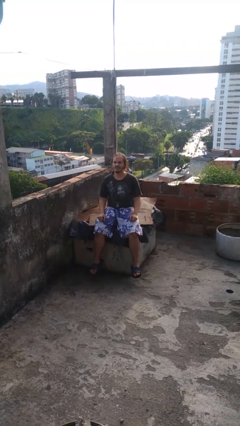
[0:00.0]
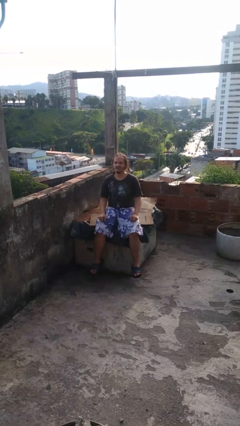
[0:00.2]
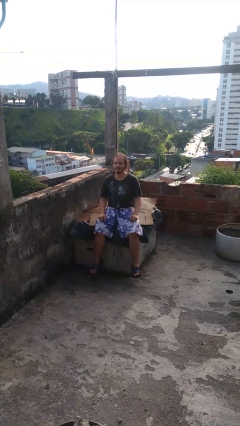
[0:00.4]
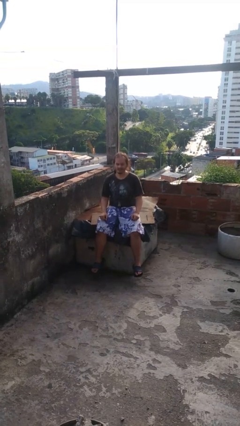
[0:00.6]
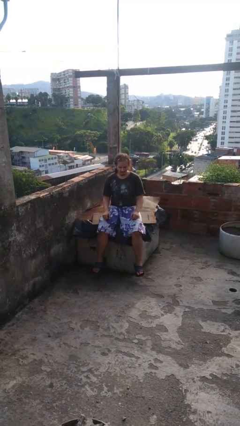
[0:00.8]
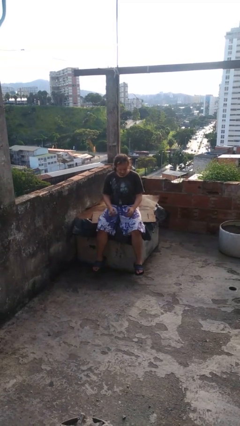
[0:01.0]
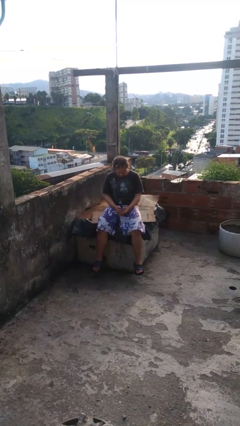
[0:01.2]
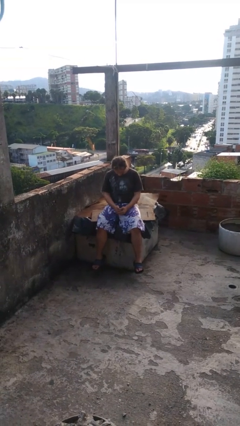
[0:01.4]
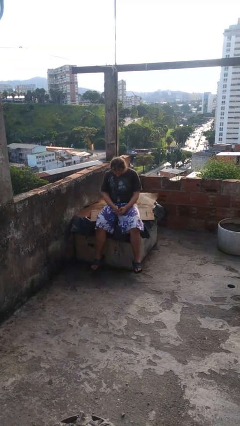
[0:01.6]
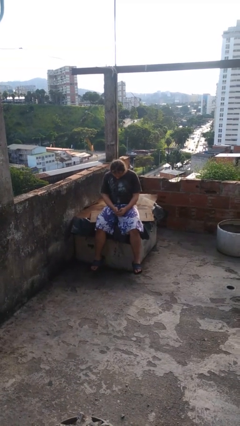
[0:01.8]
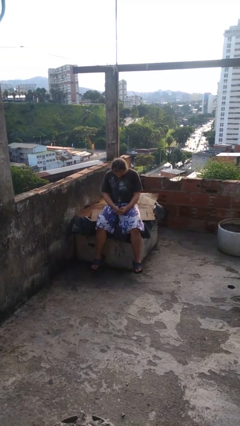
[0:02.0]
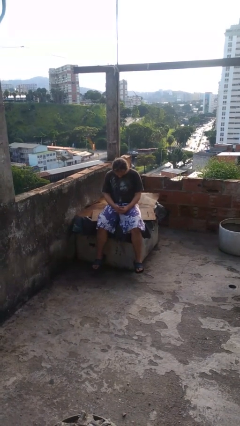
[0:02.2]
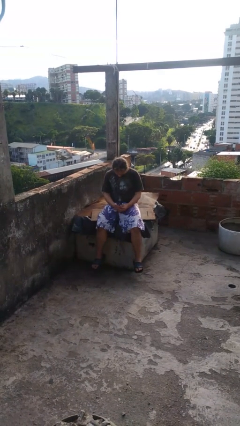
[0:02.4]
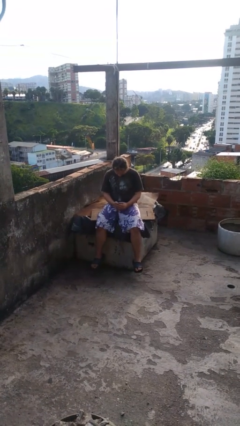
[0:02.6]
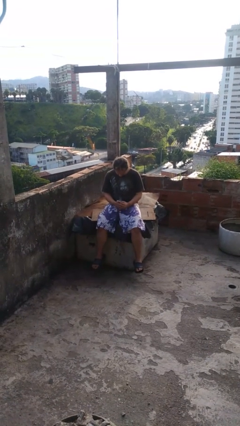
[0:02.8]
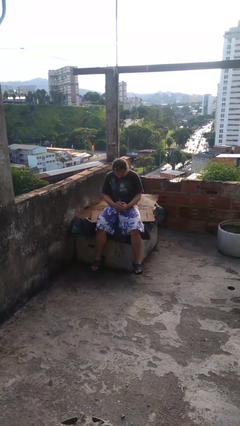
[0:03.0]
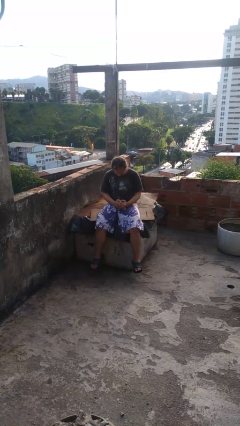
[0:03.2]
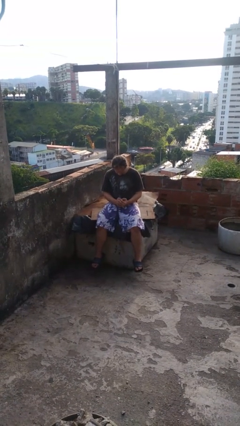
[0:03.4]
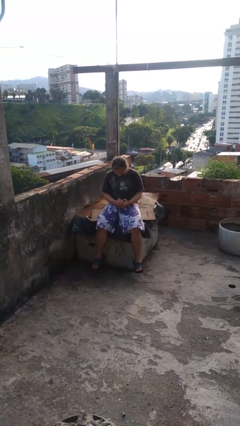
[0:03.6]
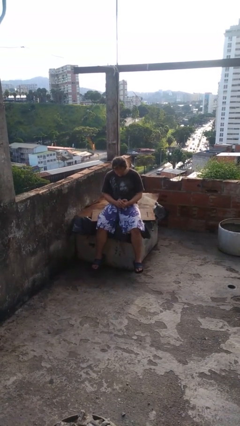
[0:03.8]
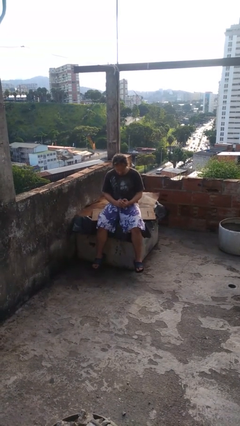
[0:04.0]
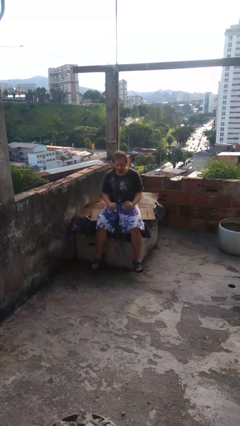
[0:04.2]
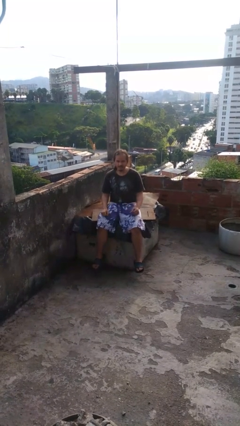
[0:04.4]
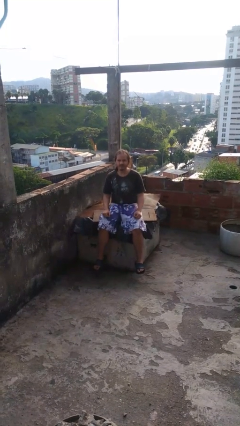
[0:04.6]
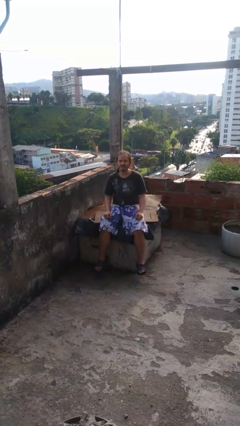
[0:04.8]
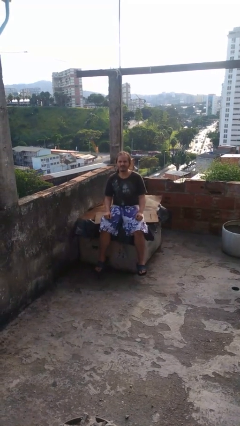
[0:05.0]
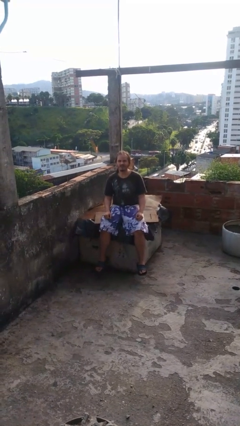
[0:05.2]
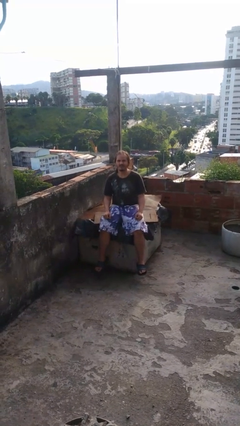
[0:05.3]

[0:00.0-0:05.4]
person looks at hands in lap

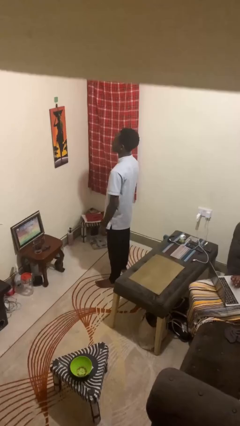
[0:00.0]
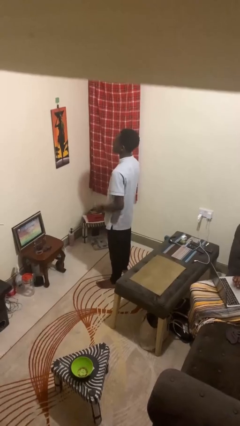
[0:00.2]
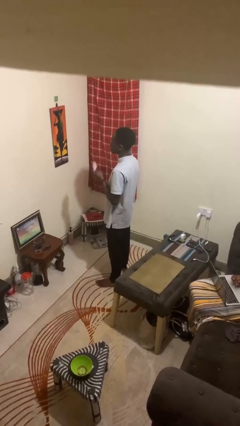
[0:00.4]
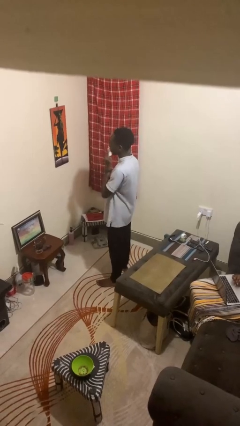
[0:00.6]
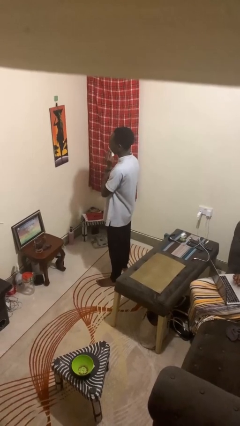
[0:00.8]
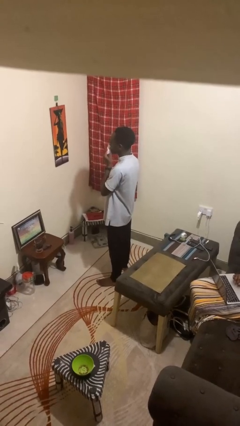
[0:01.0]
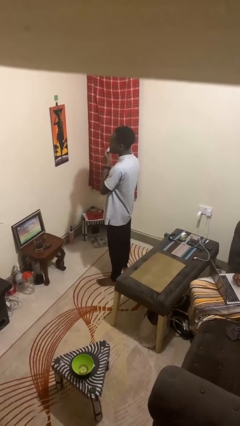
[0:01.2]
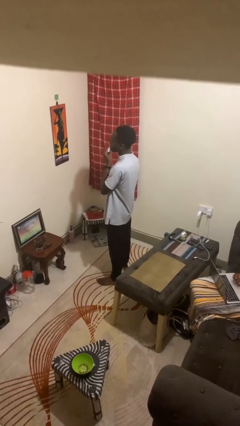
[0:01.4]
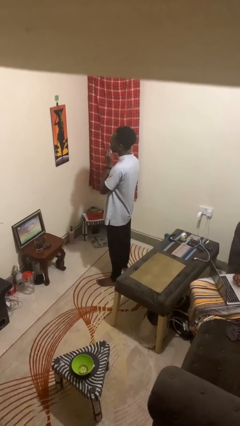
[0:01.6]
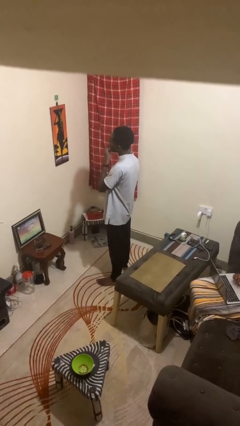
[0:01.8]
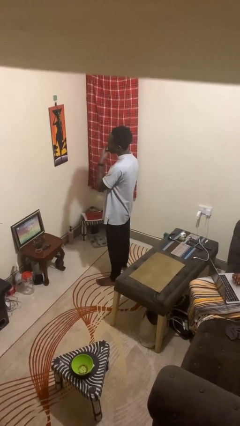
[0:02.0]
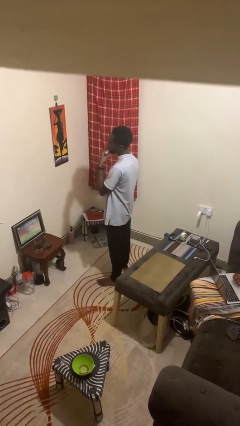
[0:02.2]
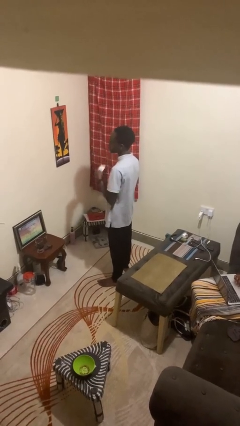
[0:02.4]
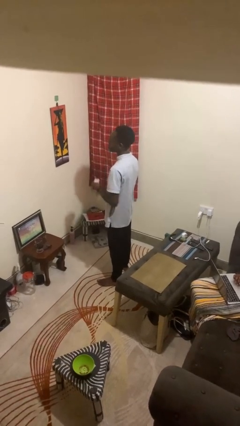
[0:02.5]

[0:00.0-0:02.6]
person wipes mouth with napkin

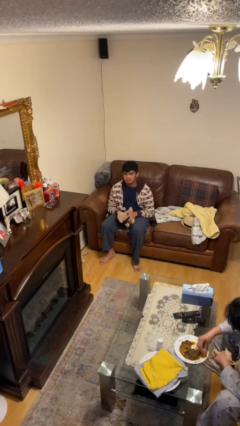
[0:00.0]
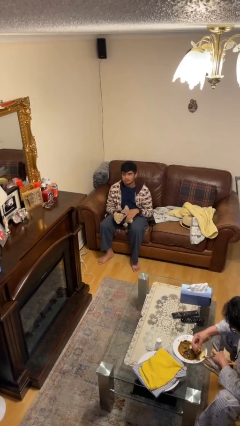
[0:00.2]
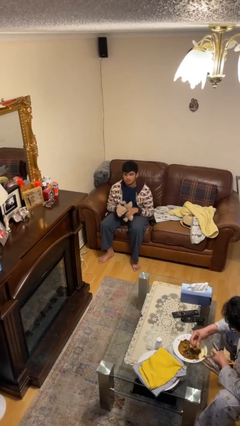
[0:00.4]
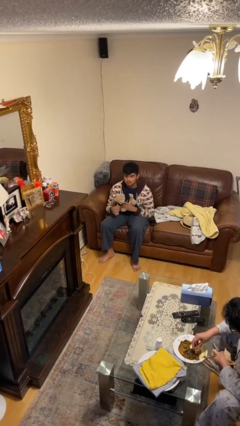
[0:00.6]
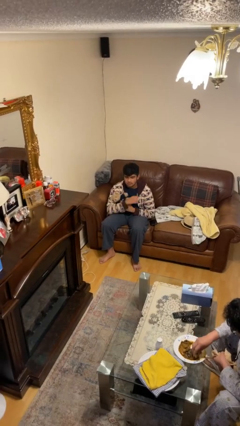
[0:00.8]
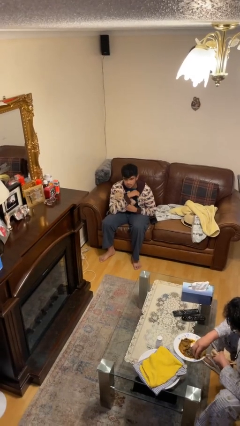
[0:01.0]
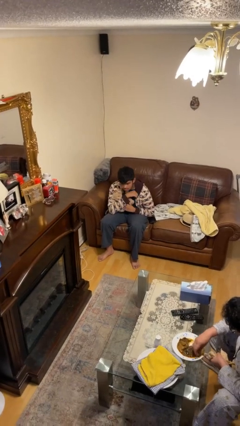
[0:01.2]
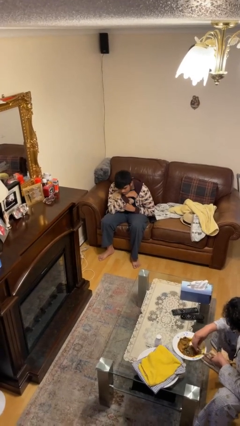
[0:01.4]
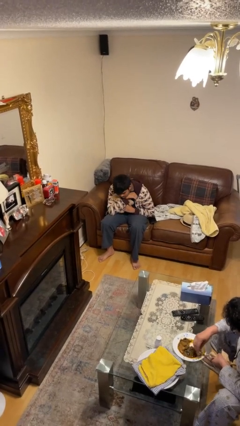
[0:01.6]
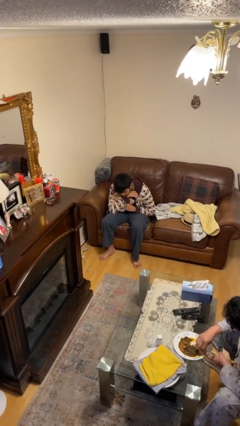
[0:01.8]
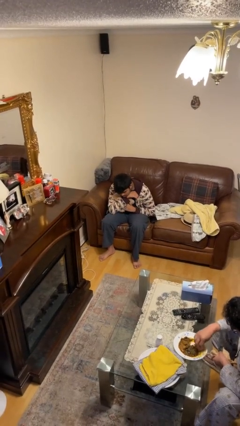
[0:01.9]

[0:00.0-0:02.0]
person hugs stuffed animal

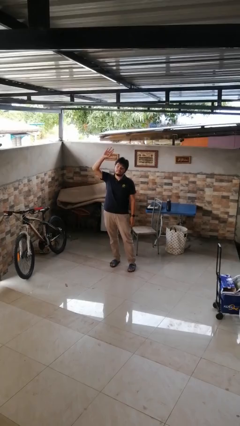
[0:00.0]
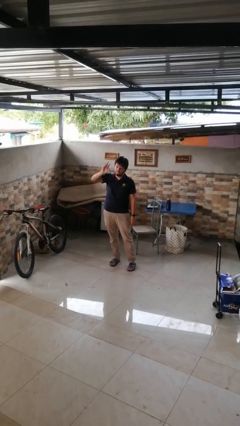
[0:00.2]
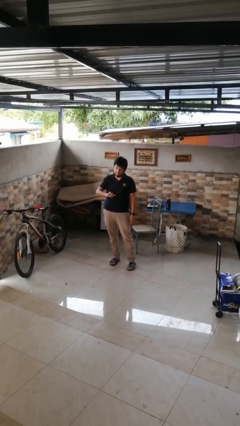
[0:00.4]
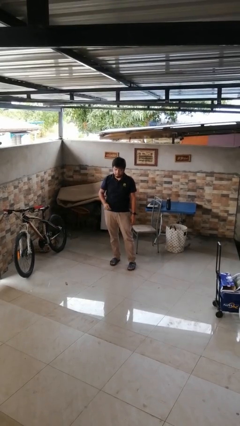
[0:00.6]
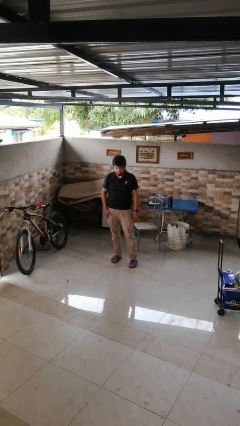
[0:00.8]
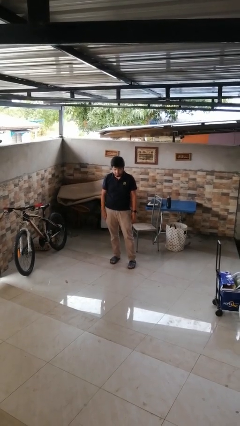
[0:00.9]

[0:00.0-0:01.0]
person gestures swipe down

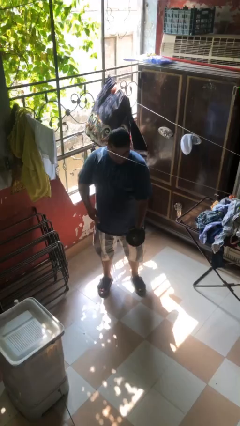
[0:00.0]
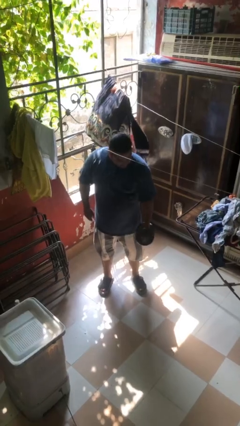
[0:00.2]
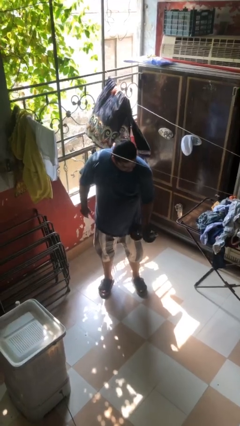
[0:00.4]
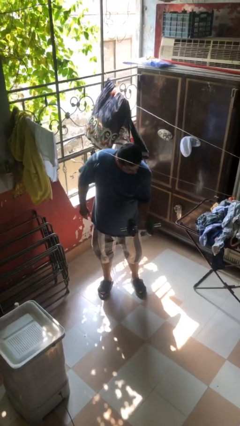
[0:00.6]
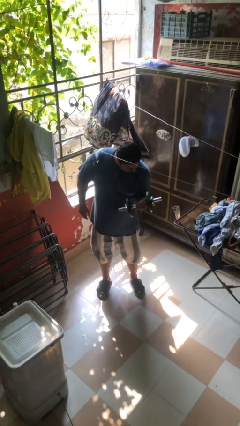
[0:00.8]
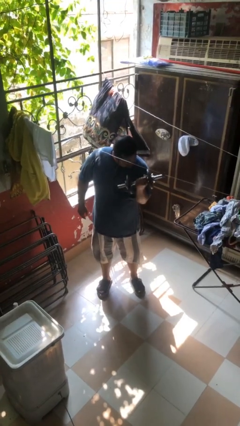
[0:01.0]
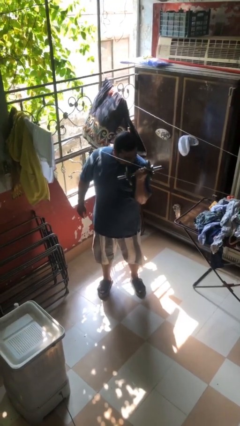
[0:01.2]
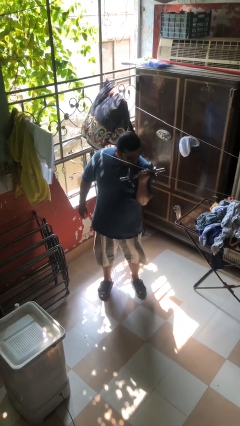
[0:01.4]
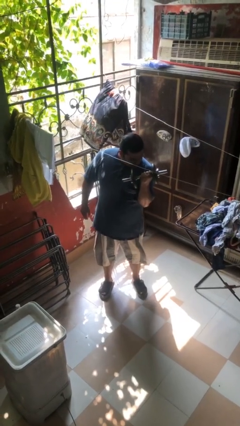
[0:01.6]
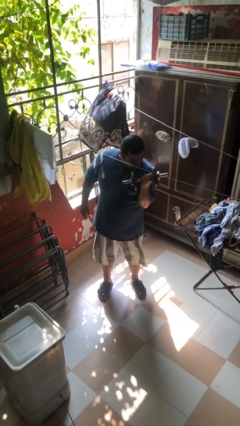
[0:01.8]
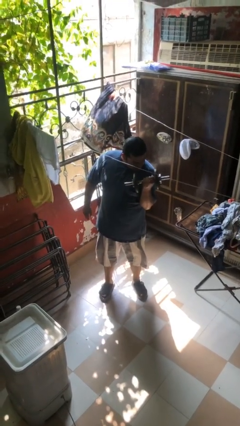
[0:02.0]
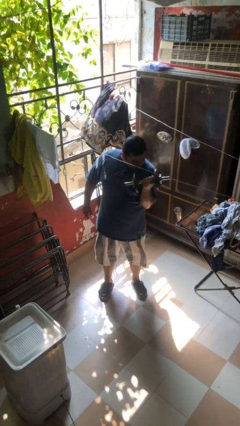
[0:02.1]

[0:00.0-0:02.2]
person lifts dumbbells

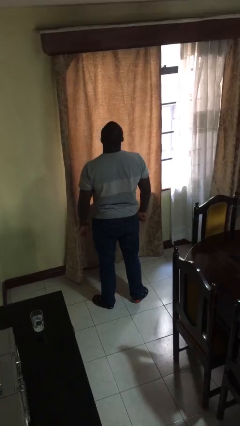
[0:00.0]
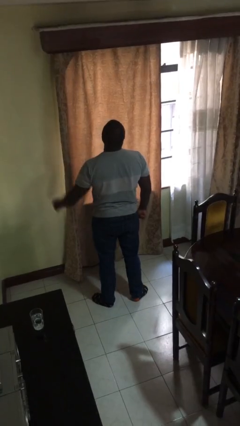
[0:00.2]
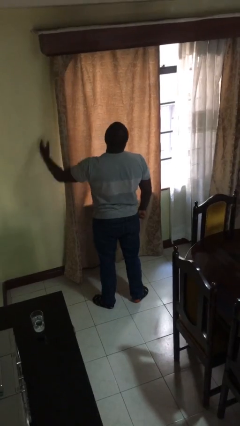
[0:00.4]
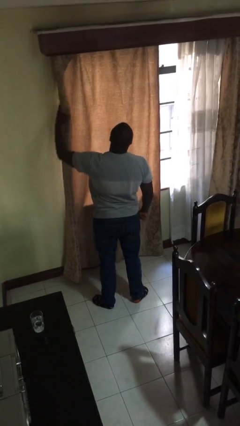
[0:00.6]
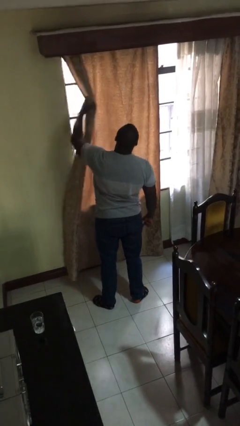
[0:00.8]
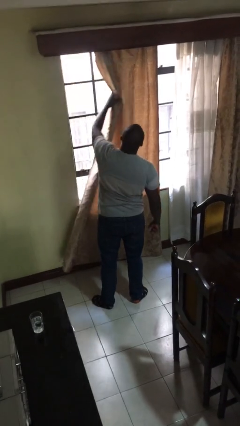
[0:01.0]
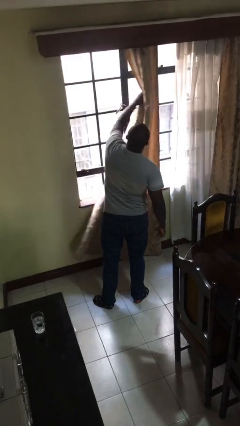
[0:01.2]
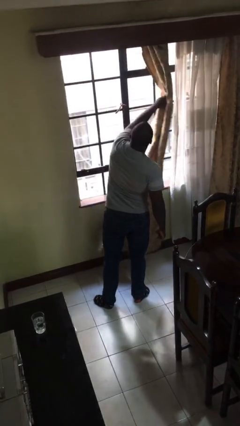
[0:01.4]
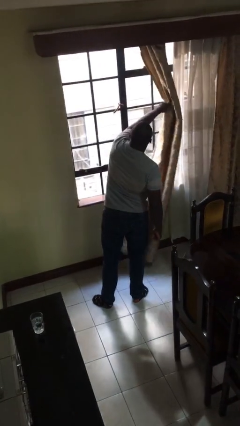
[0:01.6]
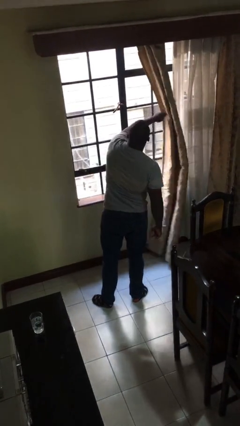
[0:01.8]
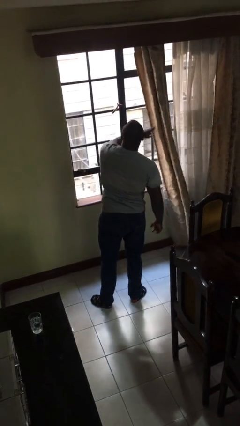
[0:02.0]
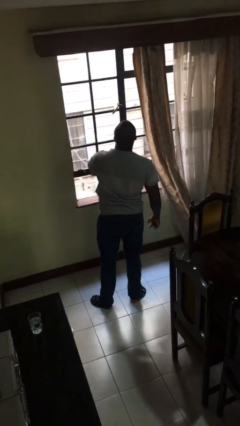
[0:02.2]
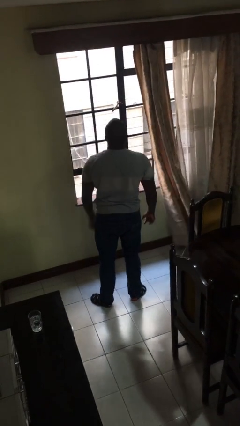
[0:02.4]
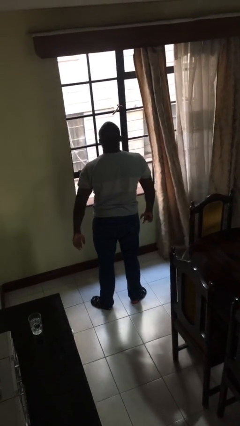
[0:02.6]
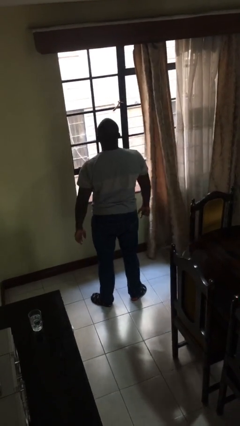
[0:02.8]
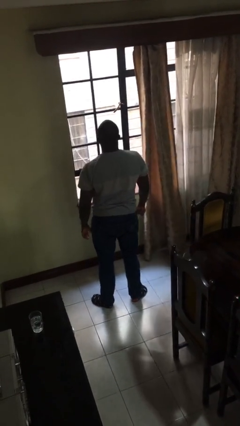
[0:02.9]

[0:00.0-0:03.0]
person opens curtains

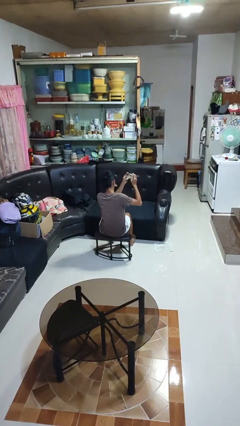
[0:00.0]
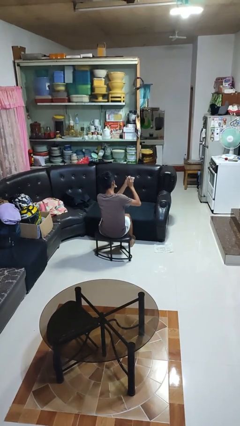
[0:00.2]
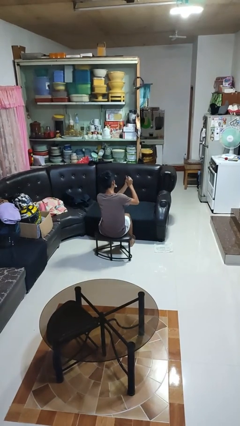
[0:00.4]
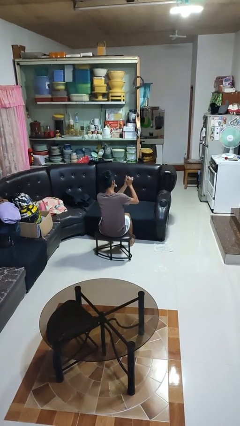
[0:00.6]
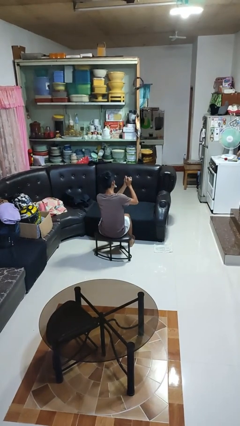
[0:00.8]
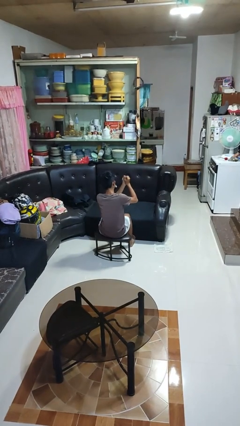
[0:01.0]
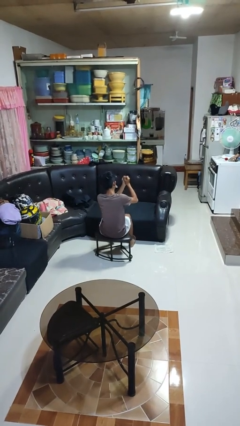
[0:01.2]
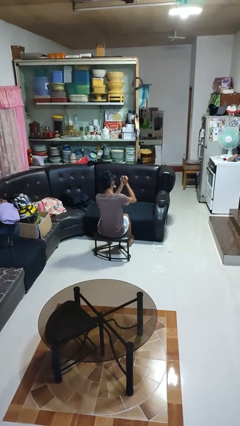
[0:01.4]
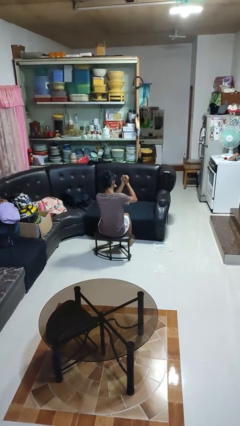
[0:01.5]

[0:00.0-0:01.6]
person crumples paper
